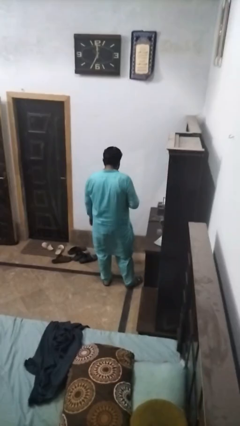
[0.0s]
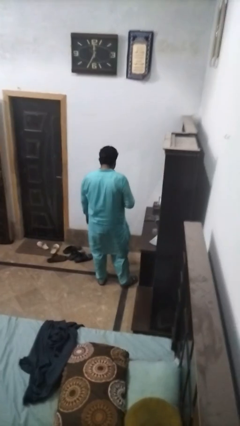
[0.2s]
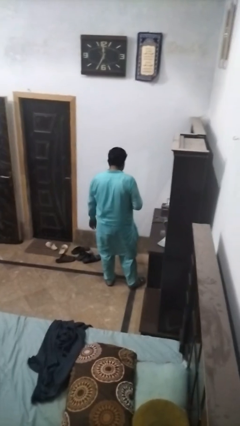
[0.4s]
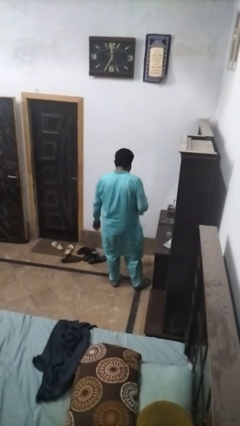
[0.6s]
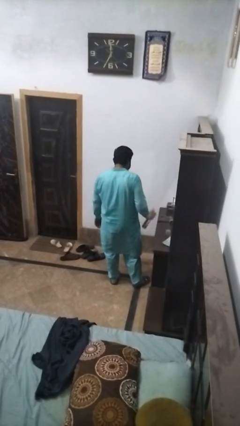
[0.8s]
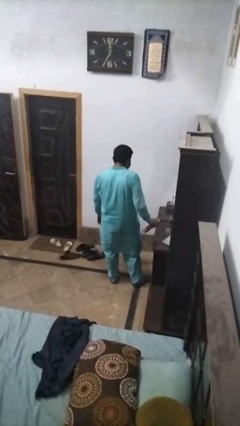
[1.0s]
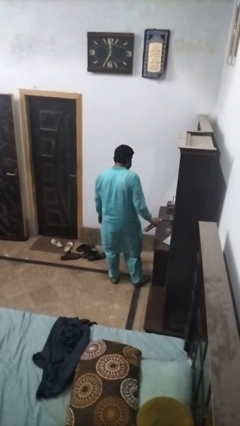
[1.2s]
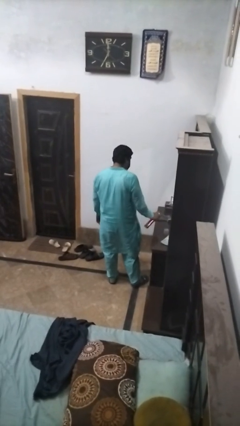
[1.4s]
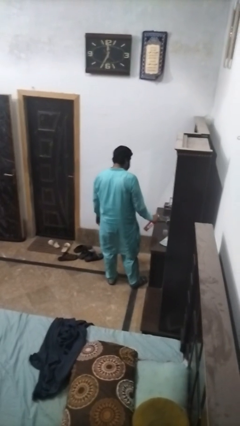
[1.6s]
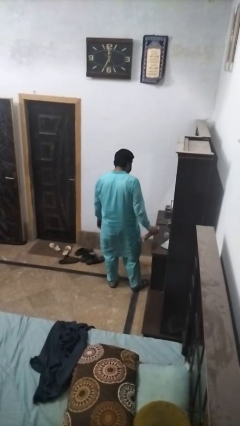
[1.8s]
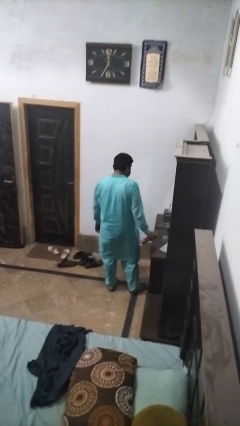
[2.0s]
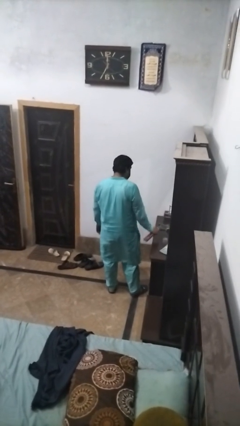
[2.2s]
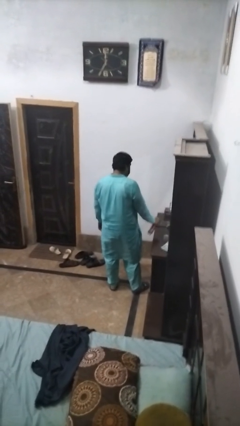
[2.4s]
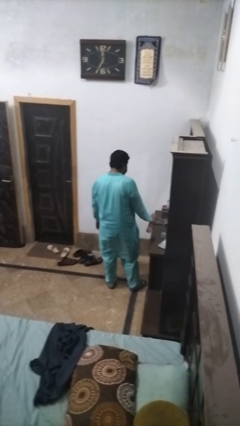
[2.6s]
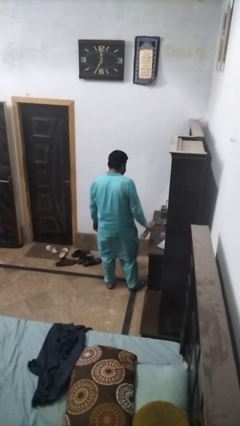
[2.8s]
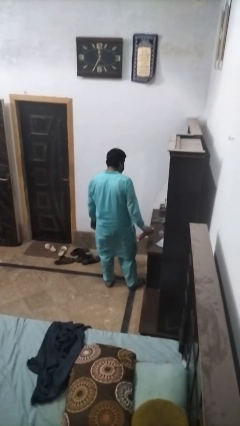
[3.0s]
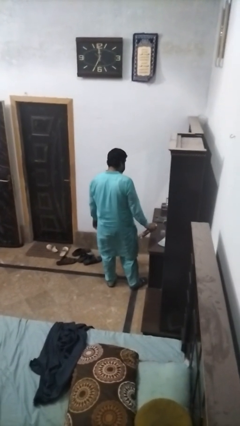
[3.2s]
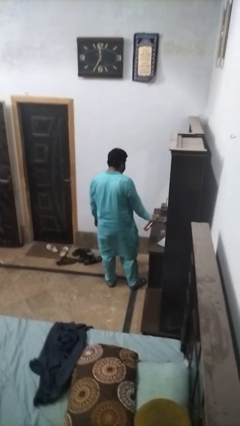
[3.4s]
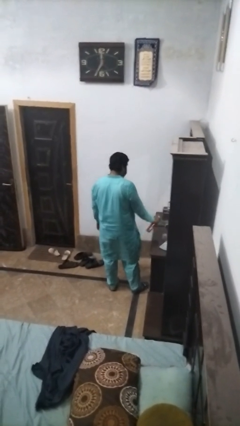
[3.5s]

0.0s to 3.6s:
person sprays from bottle

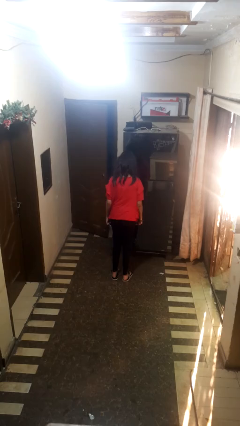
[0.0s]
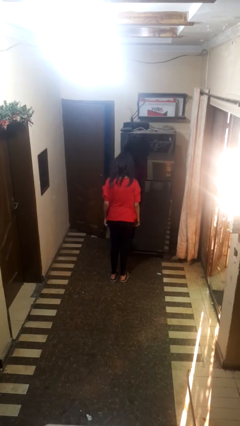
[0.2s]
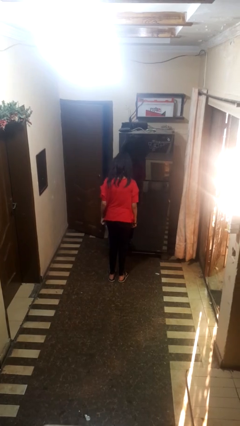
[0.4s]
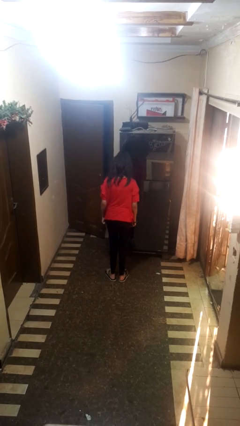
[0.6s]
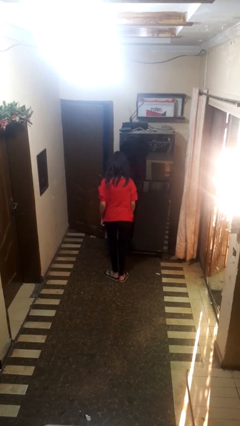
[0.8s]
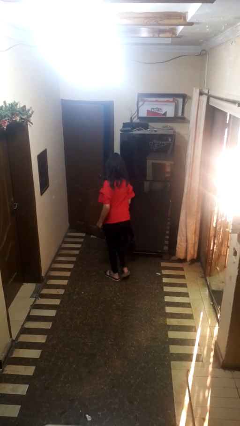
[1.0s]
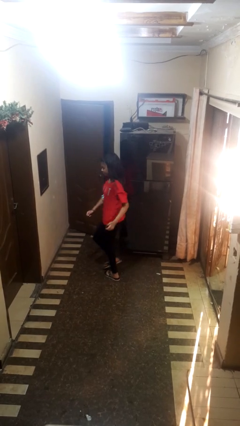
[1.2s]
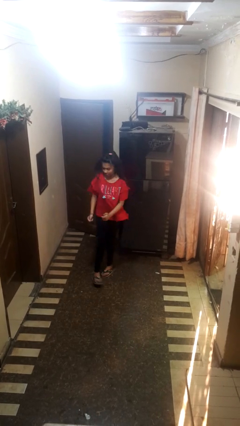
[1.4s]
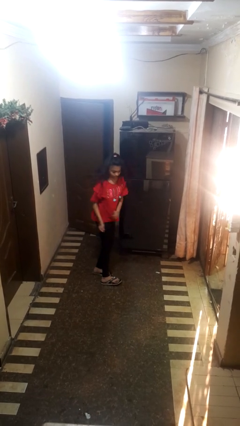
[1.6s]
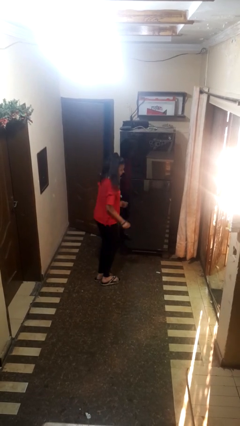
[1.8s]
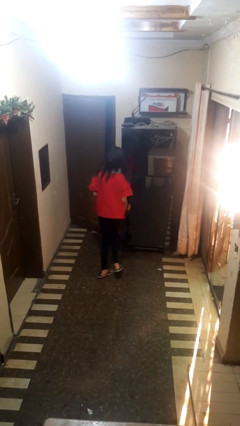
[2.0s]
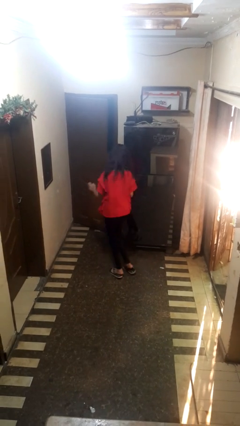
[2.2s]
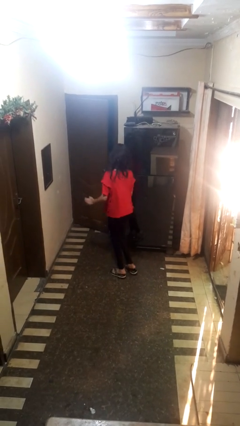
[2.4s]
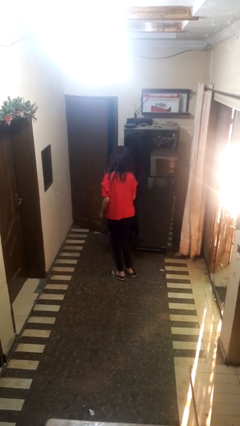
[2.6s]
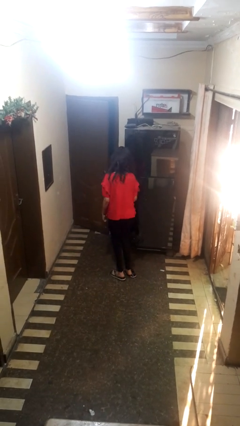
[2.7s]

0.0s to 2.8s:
person twirls

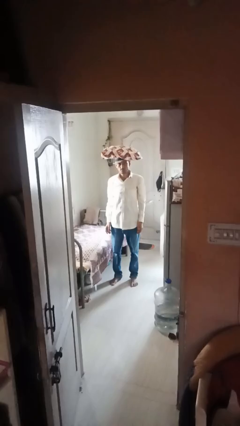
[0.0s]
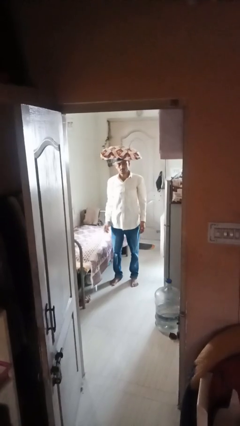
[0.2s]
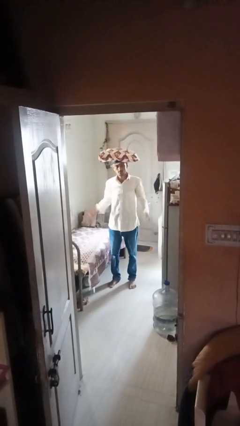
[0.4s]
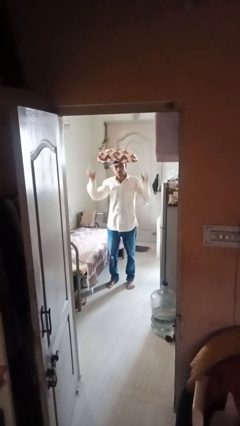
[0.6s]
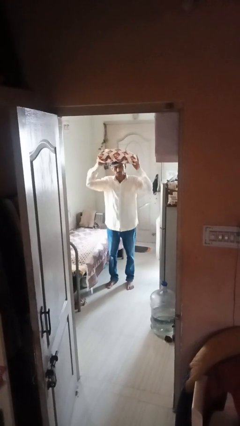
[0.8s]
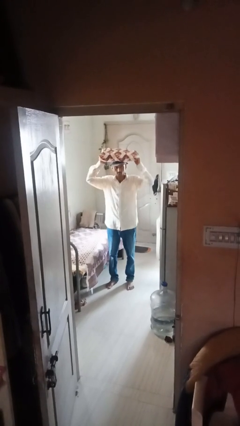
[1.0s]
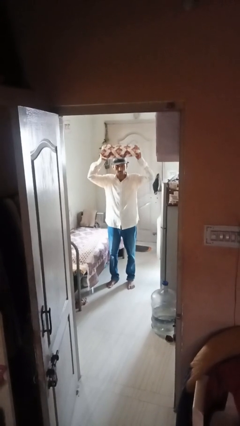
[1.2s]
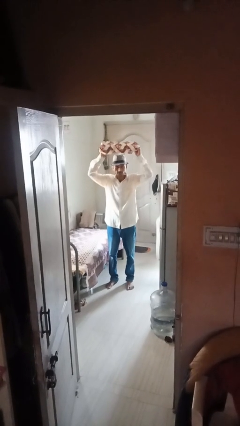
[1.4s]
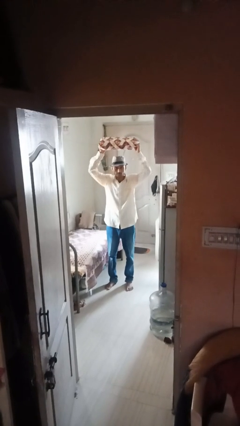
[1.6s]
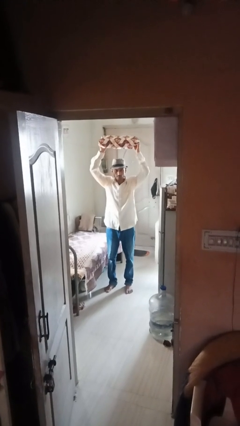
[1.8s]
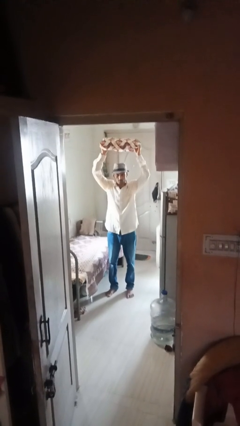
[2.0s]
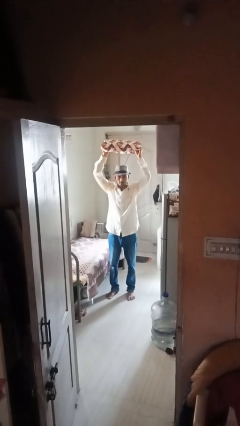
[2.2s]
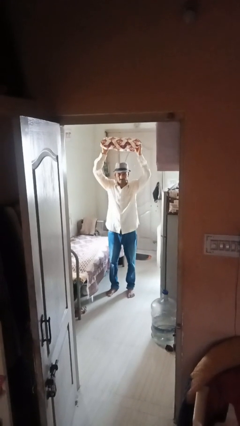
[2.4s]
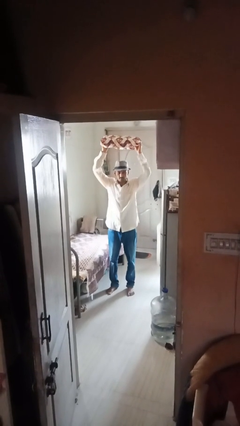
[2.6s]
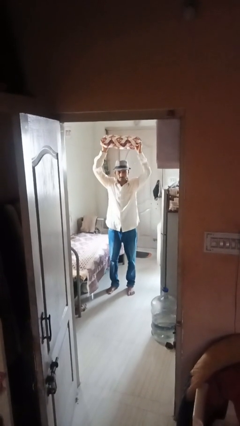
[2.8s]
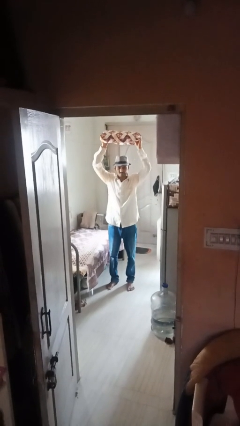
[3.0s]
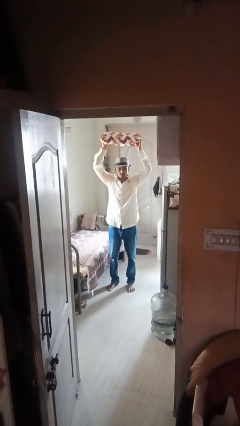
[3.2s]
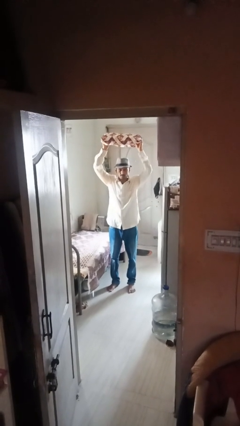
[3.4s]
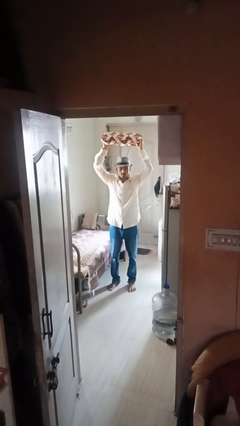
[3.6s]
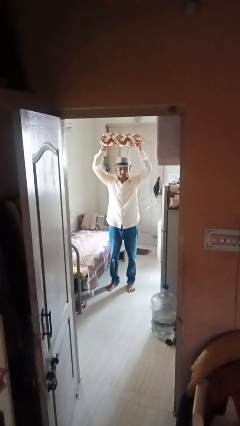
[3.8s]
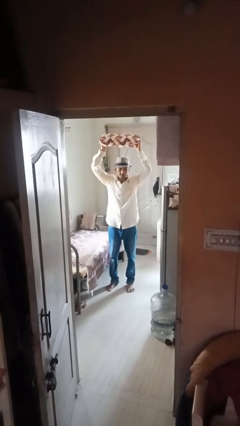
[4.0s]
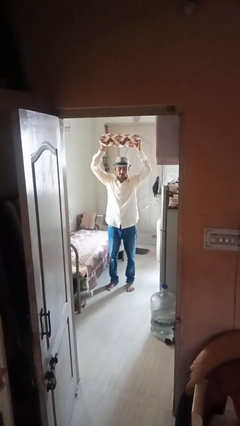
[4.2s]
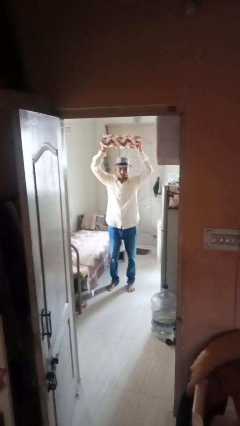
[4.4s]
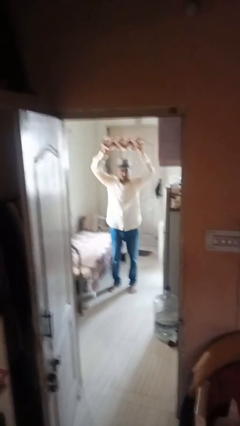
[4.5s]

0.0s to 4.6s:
person holds object above head

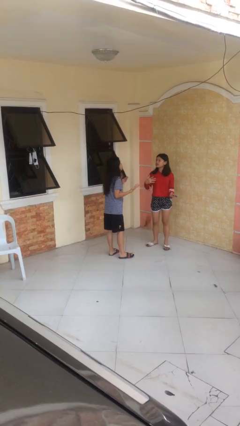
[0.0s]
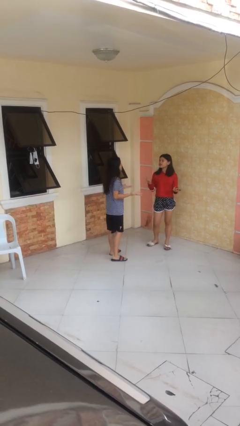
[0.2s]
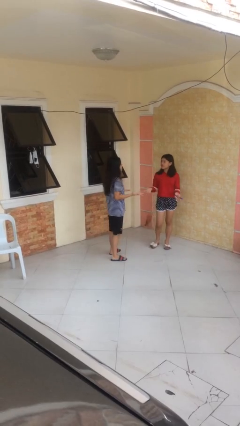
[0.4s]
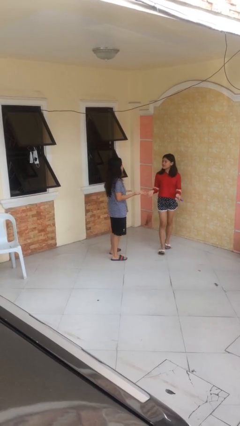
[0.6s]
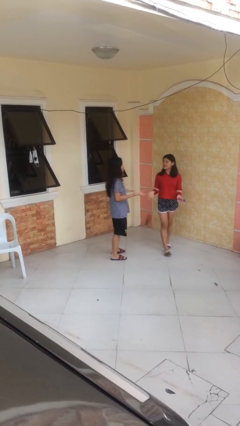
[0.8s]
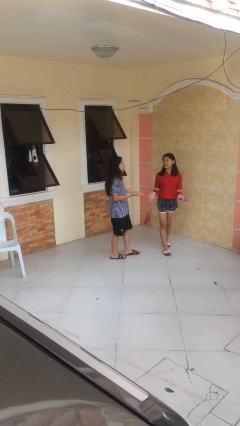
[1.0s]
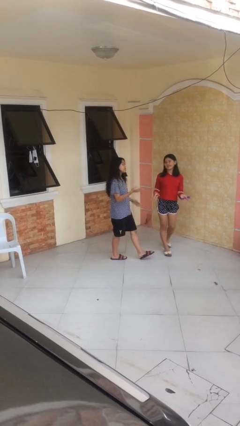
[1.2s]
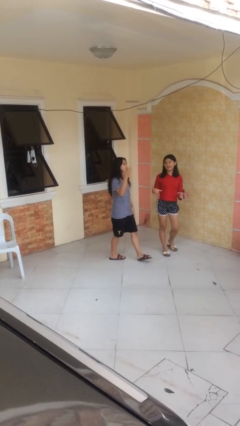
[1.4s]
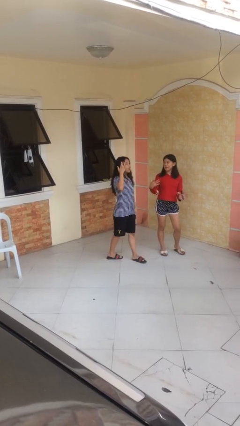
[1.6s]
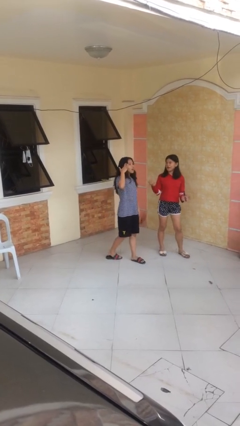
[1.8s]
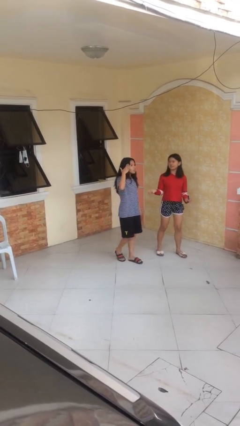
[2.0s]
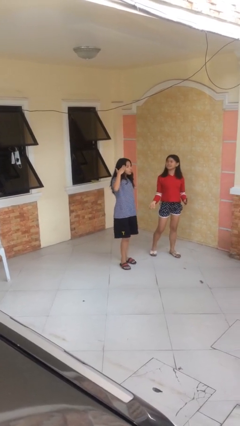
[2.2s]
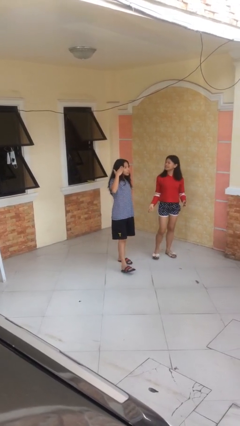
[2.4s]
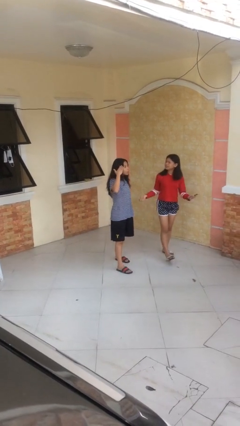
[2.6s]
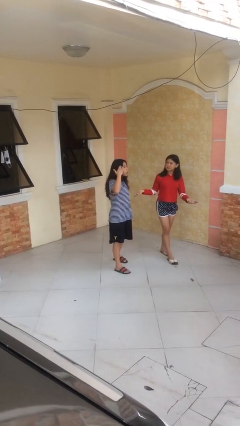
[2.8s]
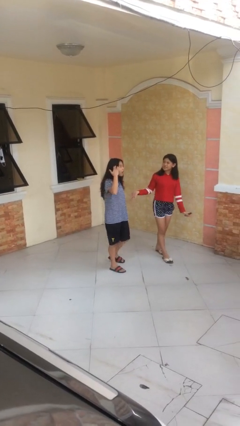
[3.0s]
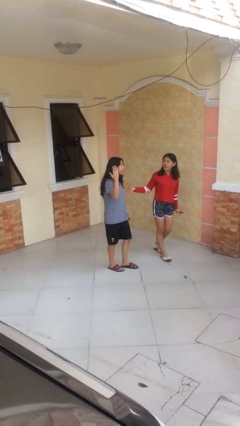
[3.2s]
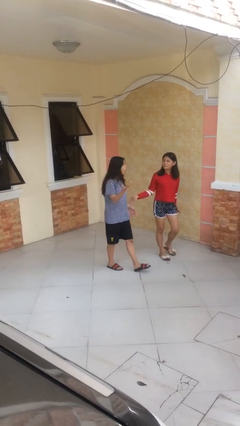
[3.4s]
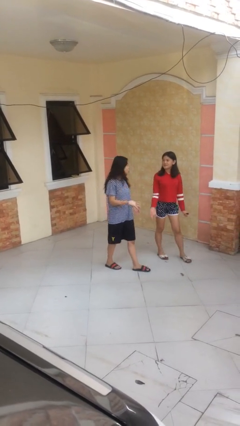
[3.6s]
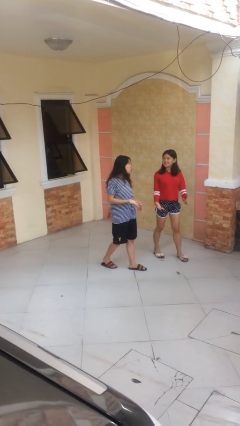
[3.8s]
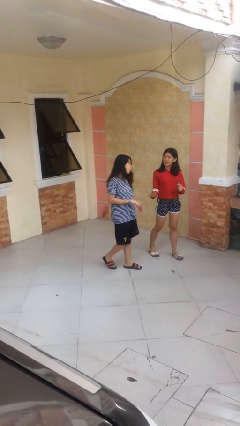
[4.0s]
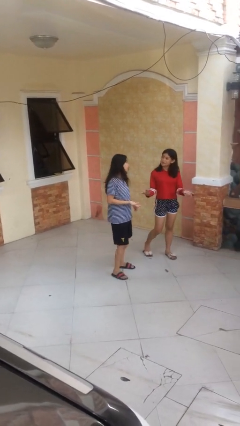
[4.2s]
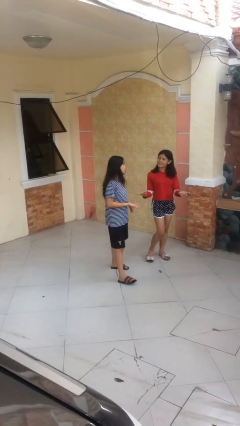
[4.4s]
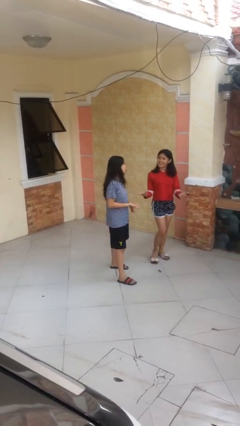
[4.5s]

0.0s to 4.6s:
person talks to person

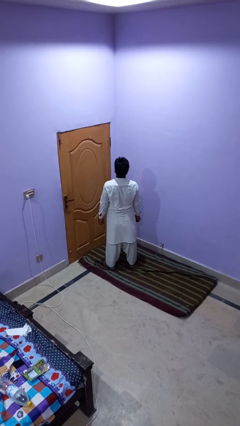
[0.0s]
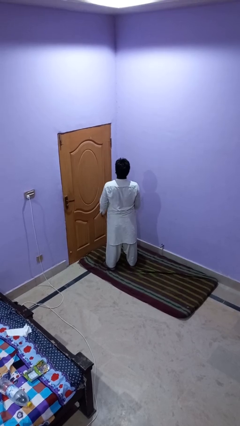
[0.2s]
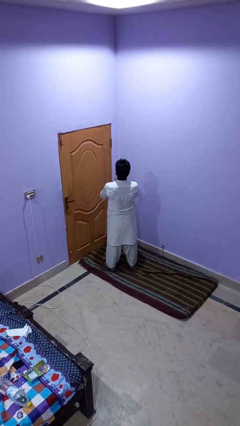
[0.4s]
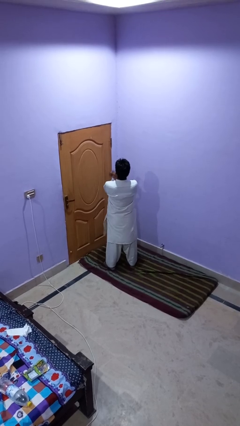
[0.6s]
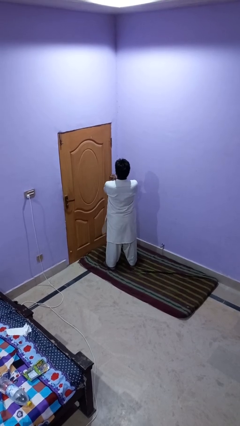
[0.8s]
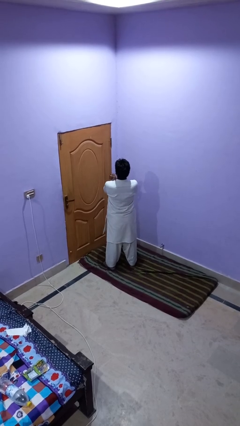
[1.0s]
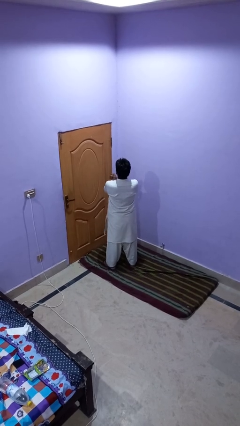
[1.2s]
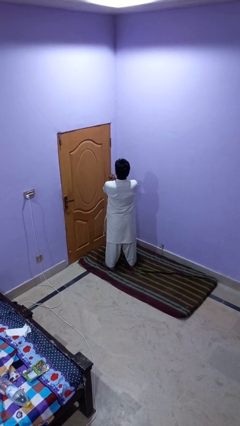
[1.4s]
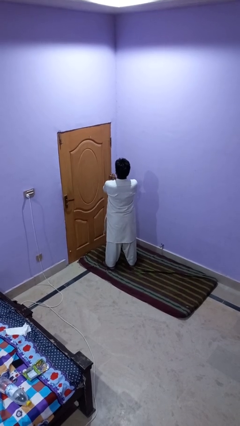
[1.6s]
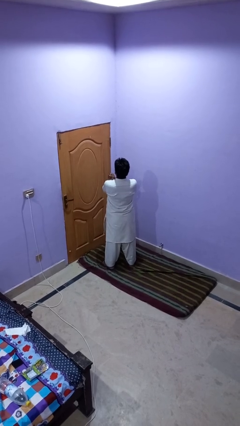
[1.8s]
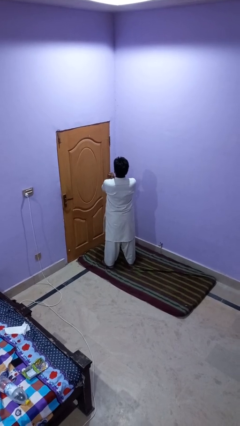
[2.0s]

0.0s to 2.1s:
person crosses arms
